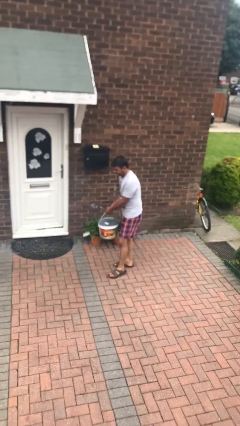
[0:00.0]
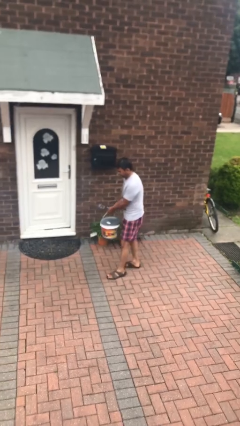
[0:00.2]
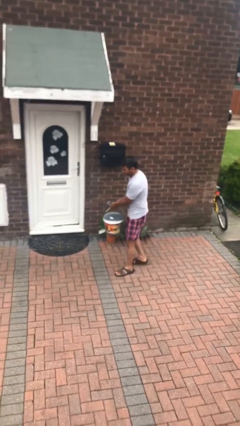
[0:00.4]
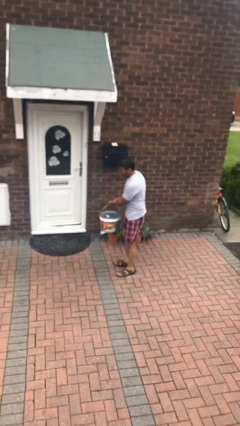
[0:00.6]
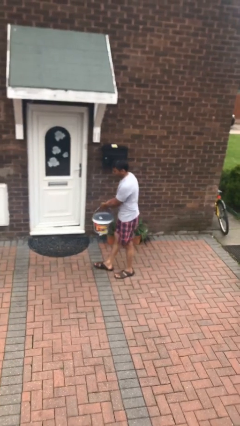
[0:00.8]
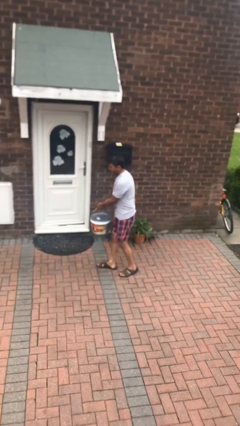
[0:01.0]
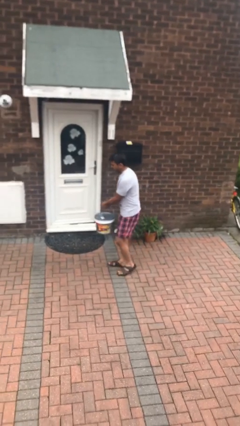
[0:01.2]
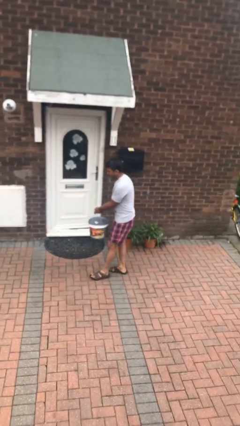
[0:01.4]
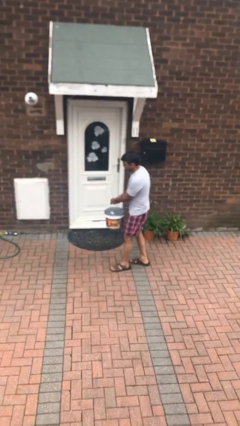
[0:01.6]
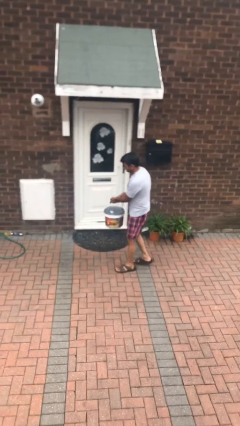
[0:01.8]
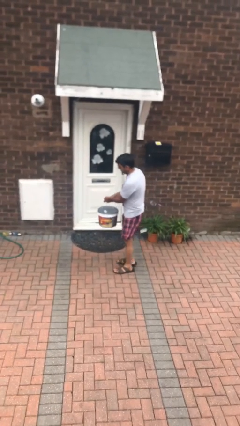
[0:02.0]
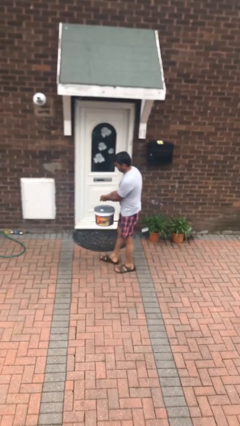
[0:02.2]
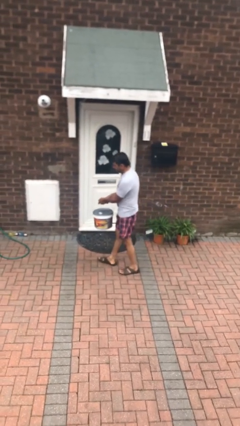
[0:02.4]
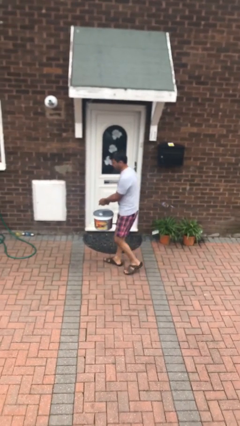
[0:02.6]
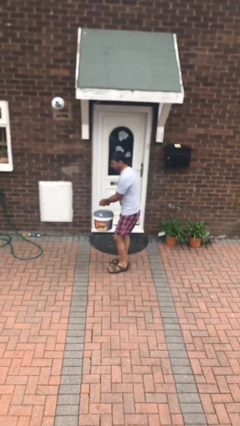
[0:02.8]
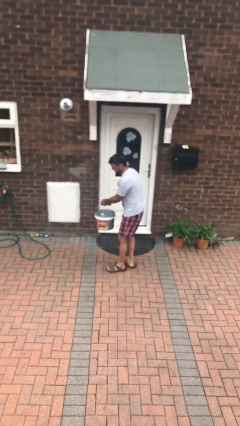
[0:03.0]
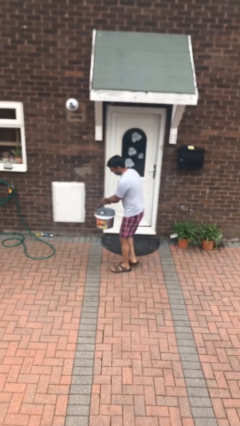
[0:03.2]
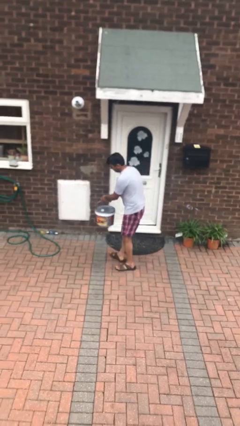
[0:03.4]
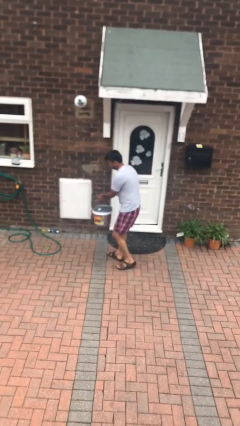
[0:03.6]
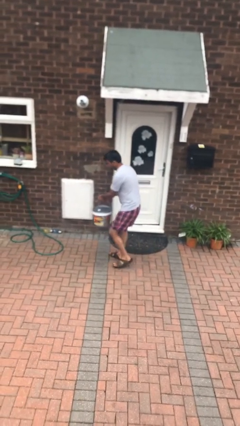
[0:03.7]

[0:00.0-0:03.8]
person carries heavy object

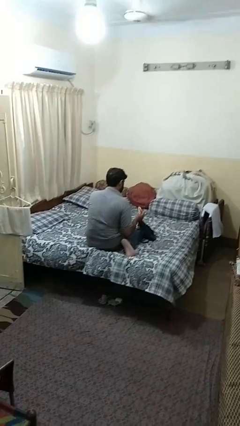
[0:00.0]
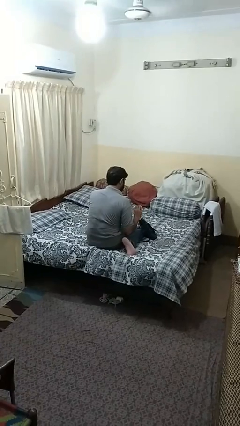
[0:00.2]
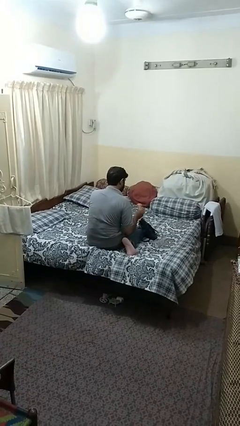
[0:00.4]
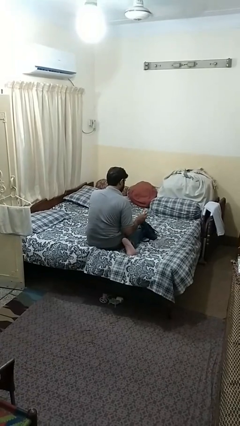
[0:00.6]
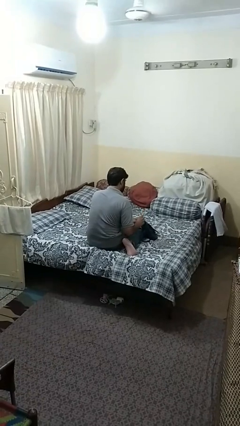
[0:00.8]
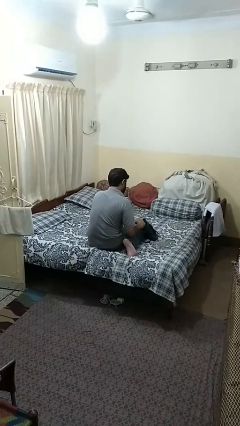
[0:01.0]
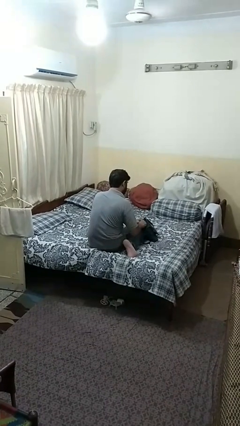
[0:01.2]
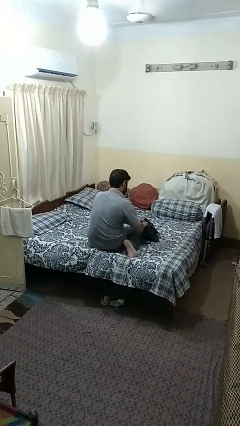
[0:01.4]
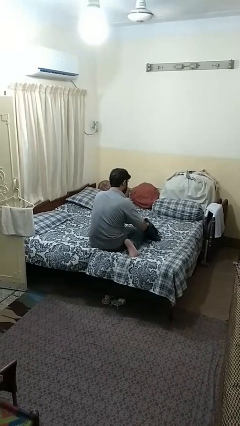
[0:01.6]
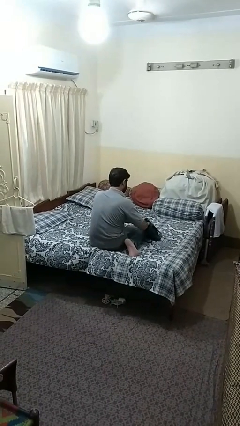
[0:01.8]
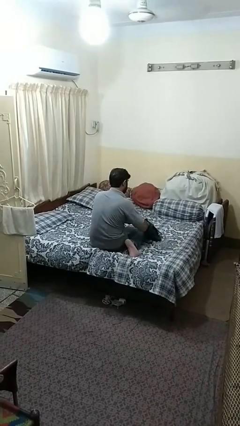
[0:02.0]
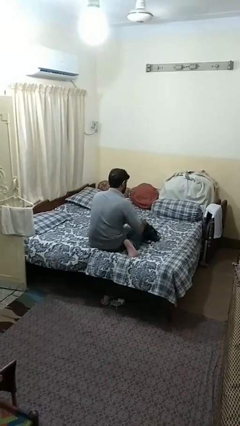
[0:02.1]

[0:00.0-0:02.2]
person puts object into purse

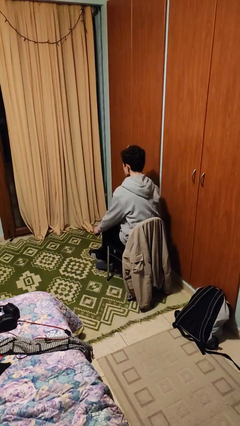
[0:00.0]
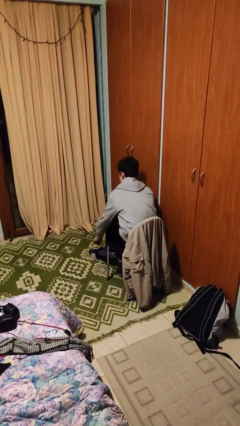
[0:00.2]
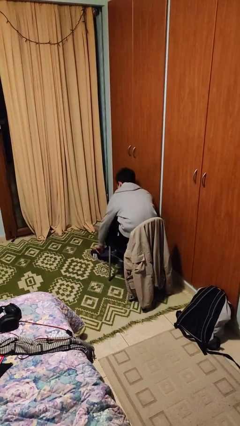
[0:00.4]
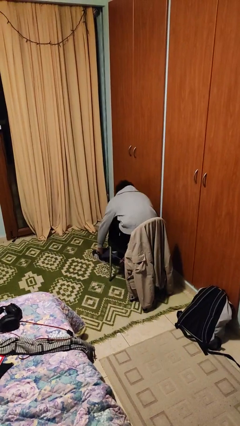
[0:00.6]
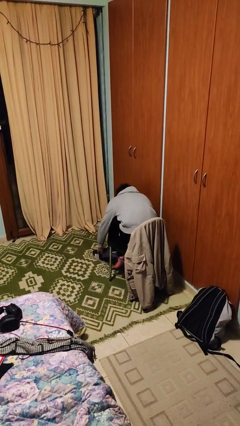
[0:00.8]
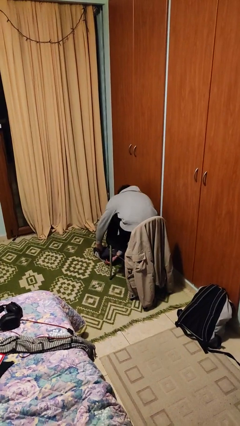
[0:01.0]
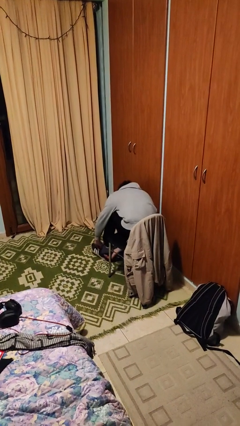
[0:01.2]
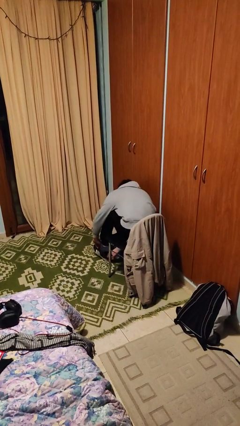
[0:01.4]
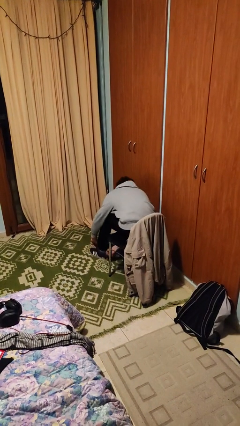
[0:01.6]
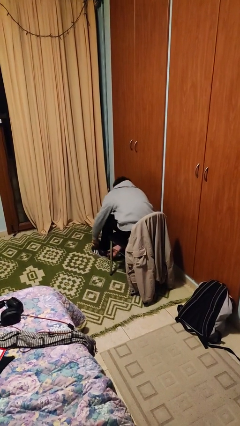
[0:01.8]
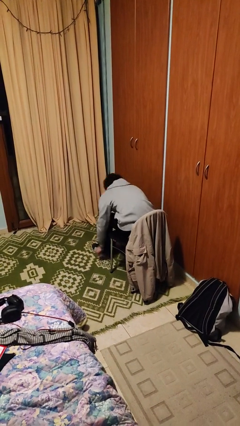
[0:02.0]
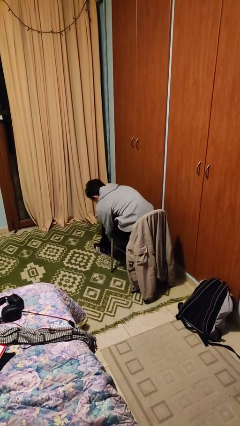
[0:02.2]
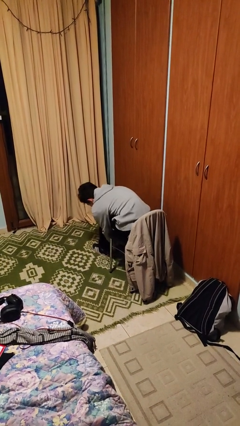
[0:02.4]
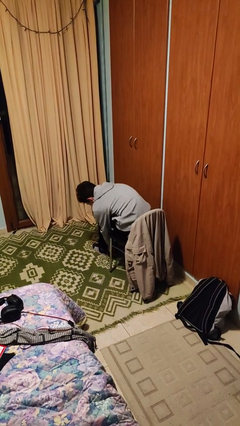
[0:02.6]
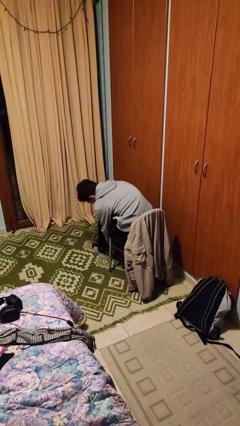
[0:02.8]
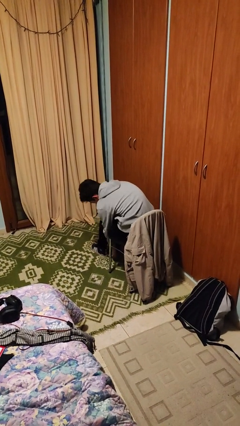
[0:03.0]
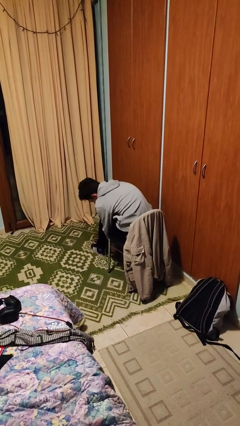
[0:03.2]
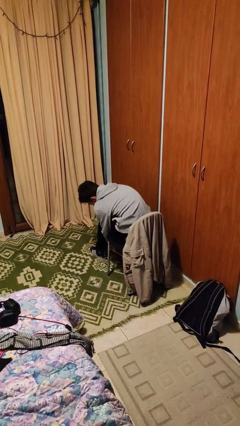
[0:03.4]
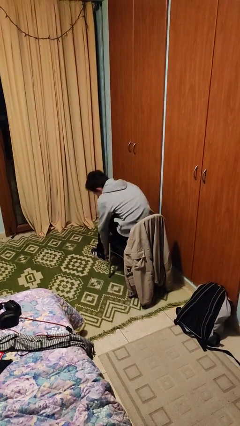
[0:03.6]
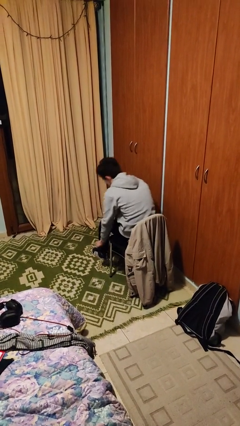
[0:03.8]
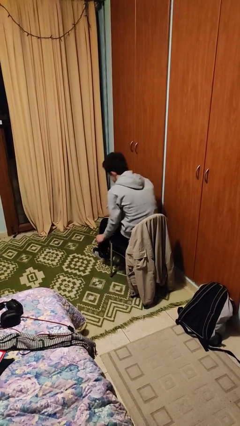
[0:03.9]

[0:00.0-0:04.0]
person puts on shoes

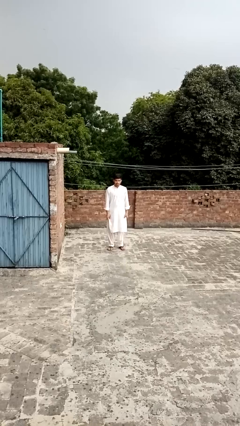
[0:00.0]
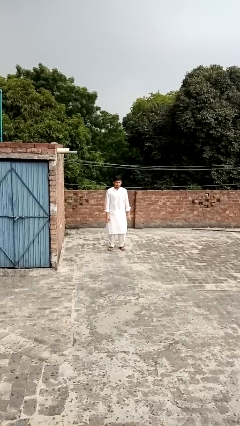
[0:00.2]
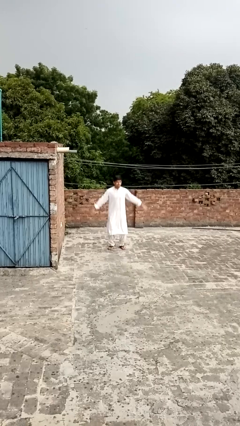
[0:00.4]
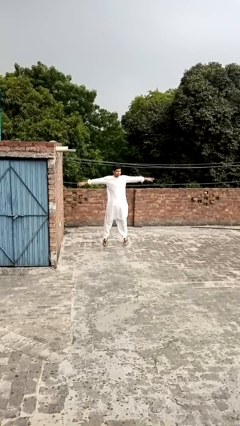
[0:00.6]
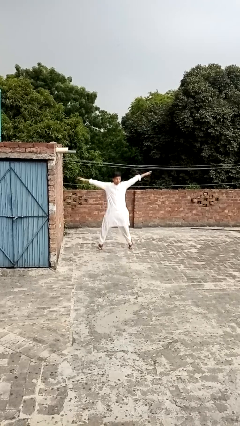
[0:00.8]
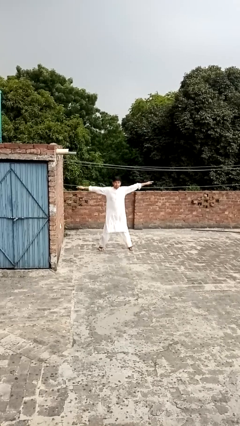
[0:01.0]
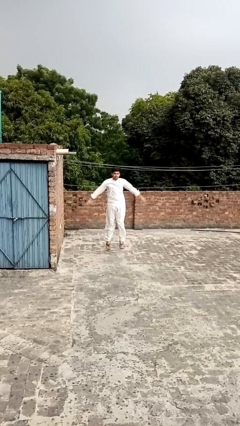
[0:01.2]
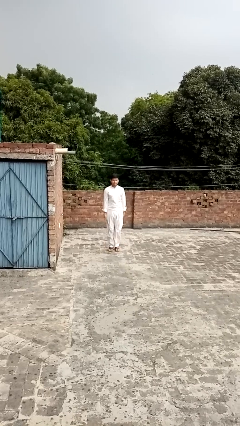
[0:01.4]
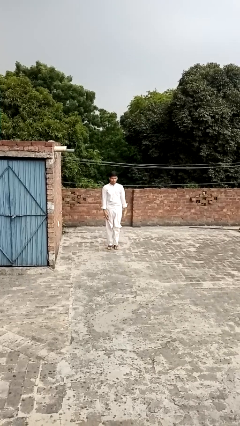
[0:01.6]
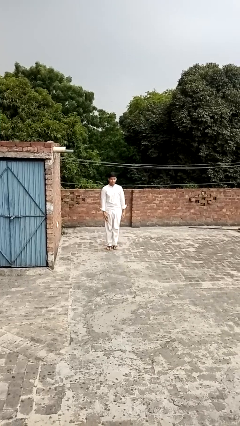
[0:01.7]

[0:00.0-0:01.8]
person exercises with jumping jacks

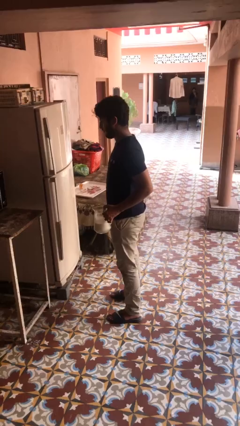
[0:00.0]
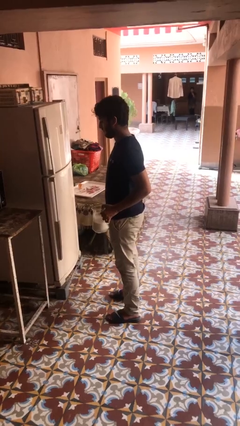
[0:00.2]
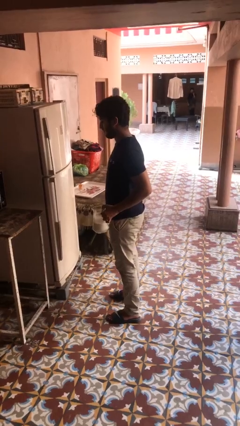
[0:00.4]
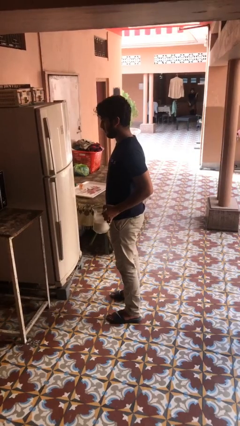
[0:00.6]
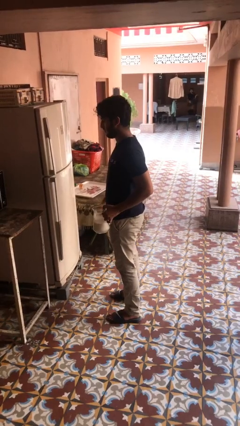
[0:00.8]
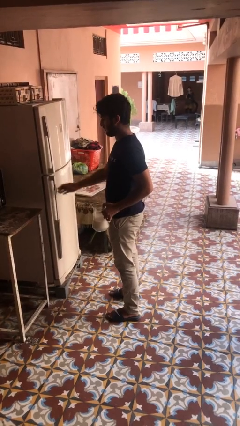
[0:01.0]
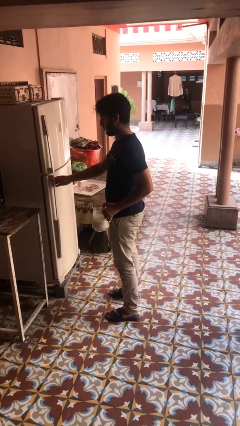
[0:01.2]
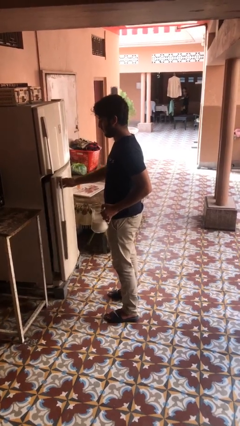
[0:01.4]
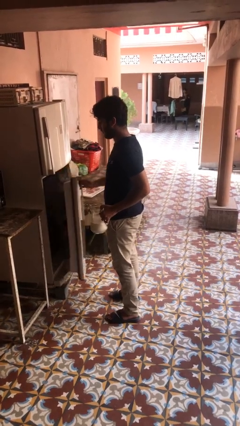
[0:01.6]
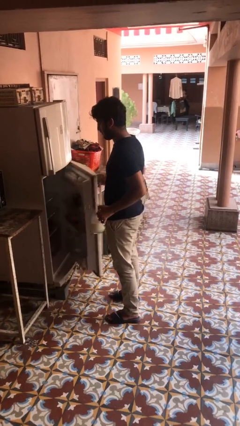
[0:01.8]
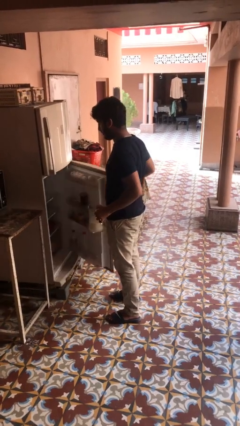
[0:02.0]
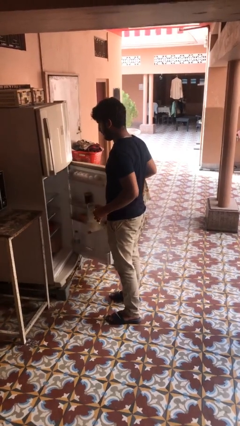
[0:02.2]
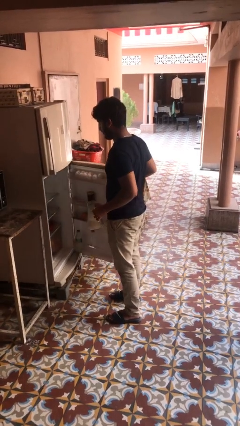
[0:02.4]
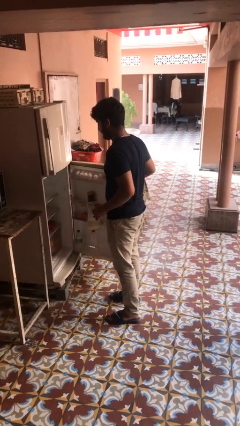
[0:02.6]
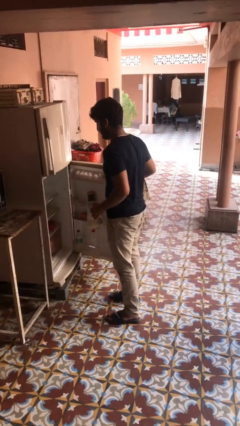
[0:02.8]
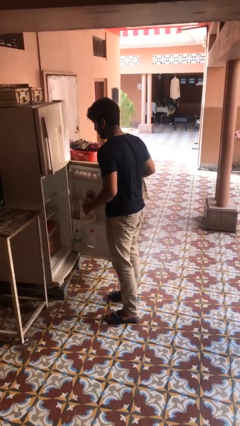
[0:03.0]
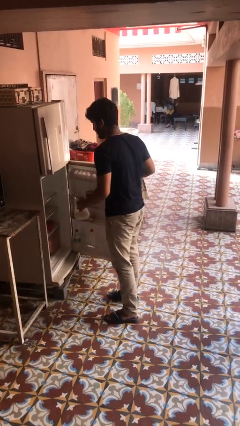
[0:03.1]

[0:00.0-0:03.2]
person opens refrigerator

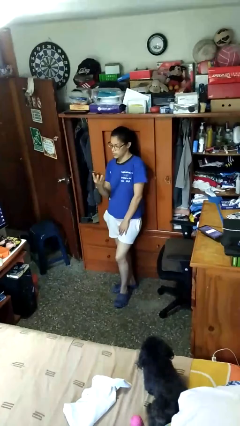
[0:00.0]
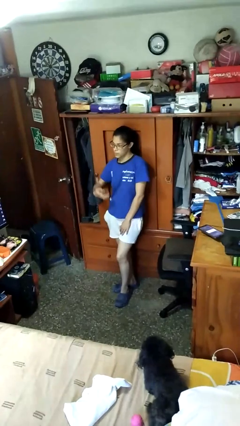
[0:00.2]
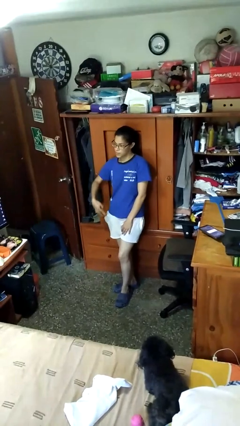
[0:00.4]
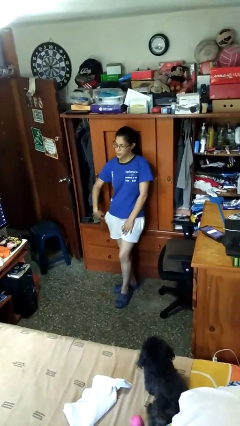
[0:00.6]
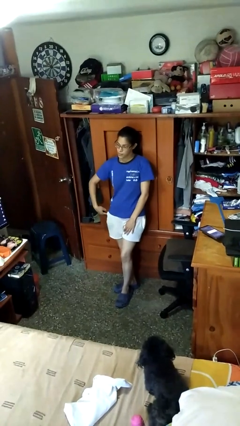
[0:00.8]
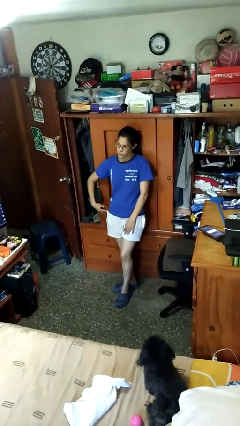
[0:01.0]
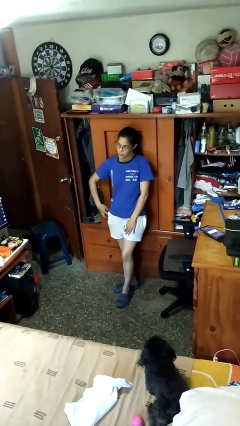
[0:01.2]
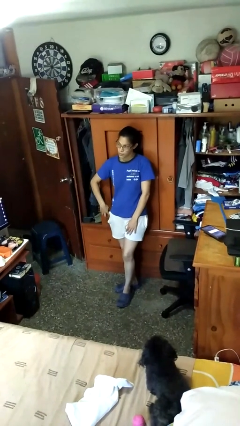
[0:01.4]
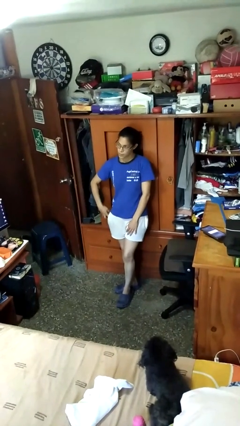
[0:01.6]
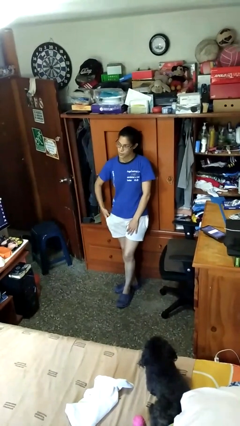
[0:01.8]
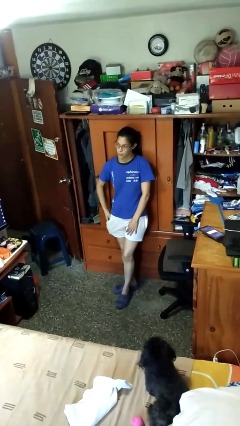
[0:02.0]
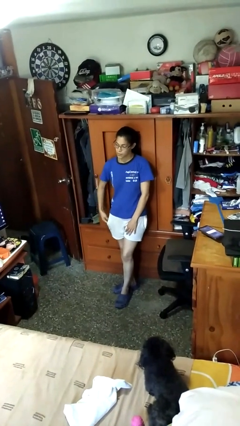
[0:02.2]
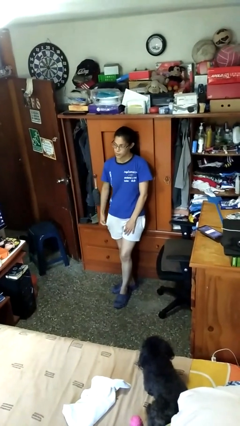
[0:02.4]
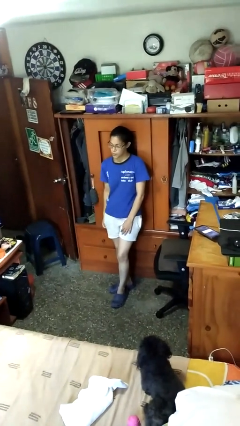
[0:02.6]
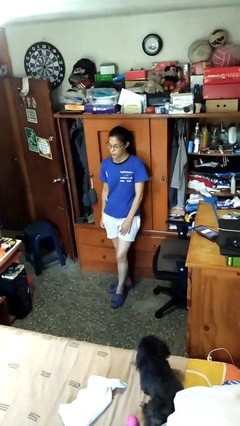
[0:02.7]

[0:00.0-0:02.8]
person puts phone into pocket
